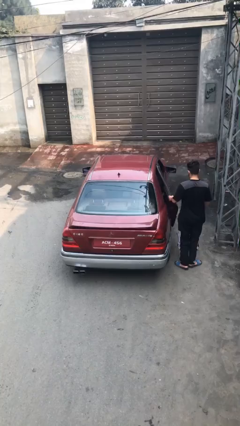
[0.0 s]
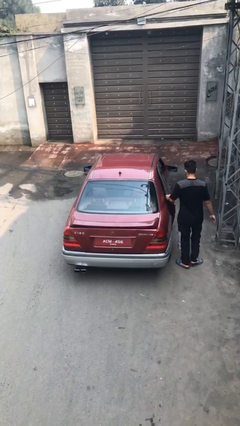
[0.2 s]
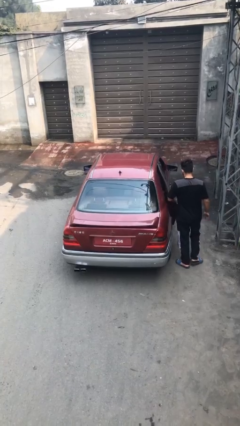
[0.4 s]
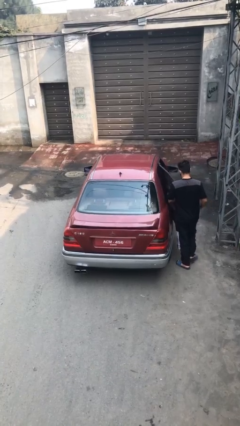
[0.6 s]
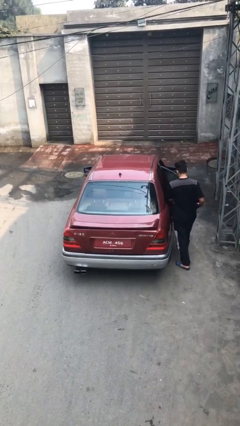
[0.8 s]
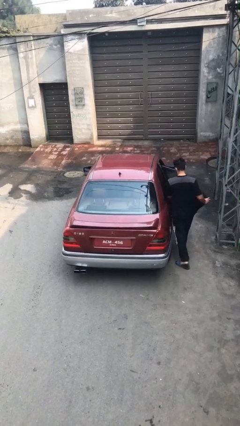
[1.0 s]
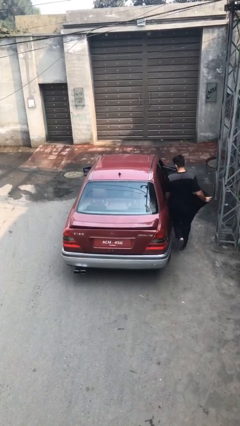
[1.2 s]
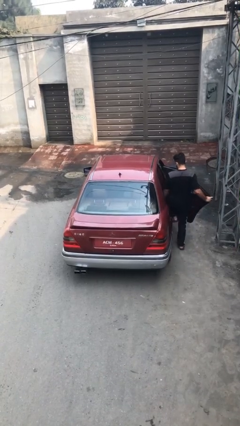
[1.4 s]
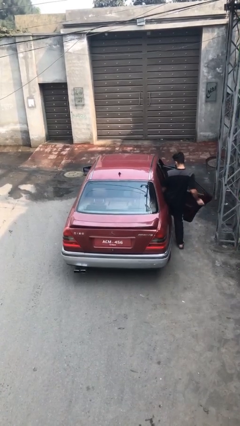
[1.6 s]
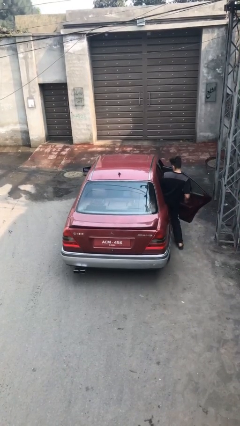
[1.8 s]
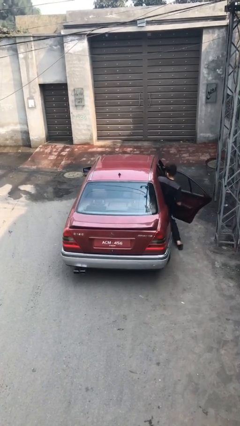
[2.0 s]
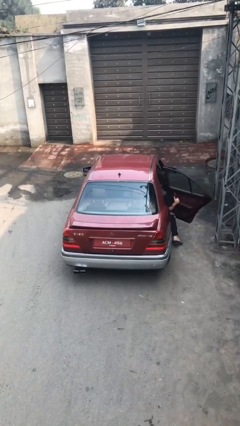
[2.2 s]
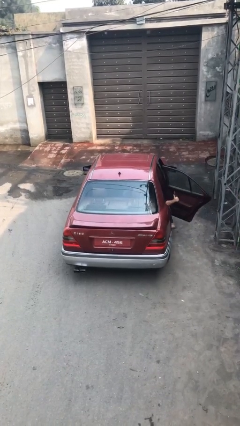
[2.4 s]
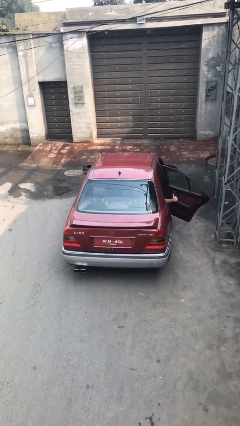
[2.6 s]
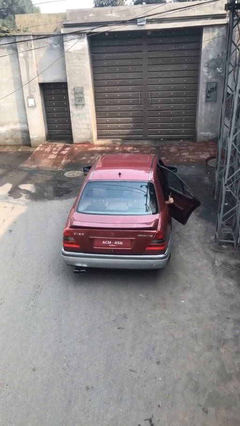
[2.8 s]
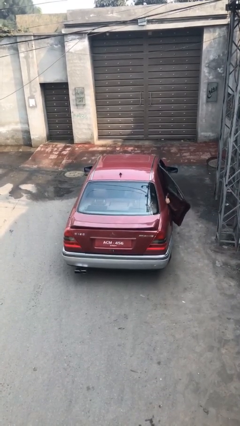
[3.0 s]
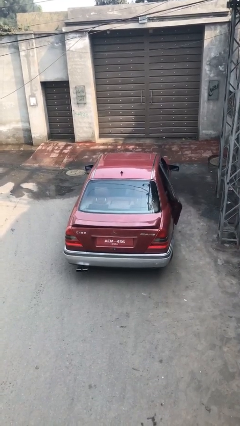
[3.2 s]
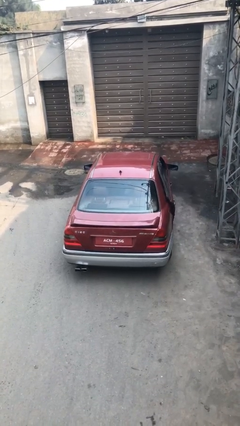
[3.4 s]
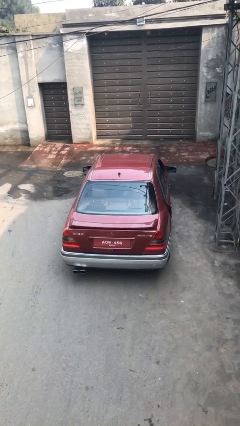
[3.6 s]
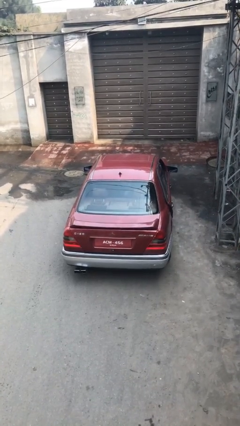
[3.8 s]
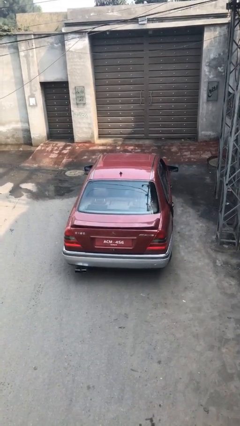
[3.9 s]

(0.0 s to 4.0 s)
car picks up person

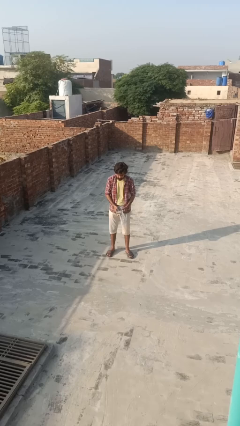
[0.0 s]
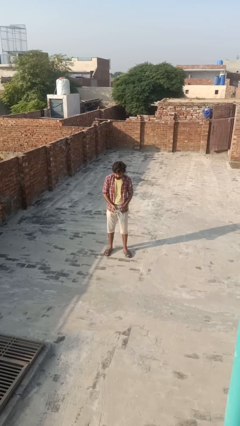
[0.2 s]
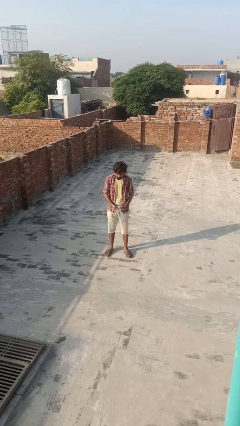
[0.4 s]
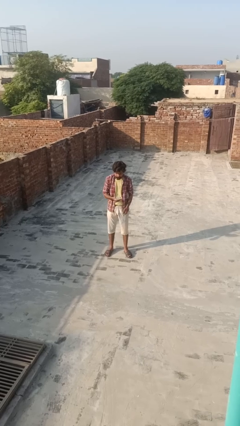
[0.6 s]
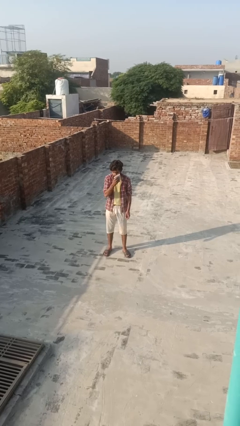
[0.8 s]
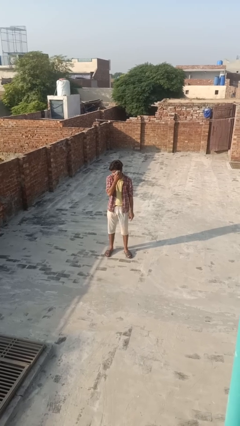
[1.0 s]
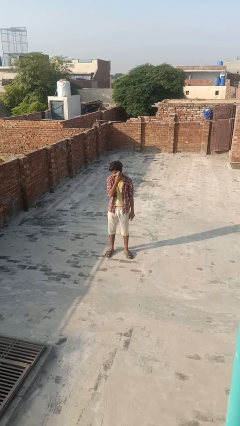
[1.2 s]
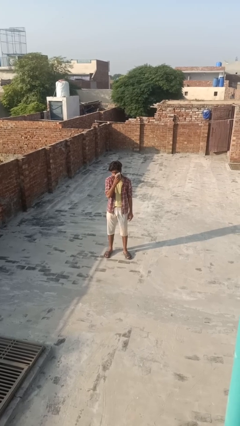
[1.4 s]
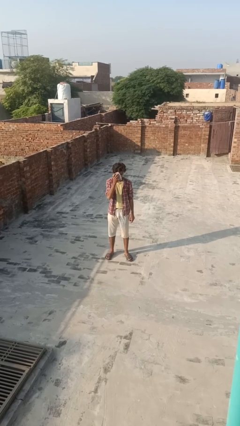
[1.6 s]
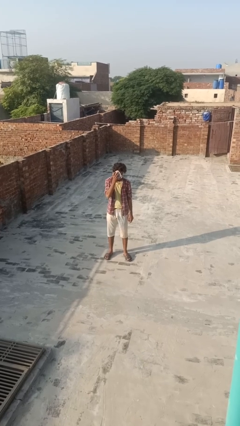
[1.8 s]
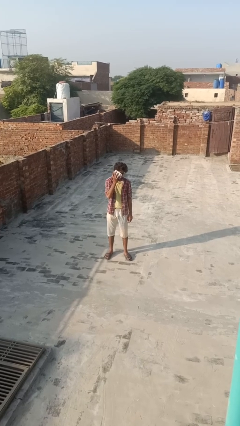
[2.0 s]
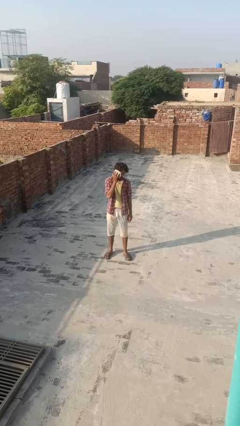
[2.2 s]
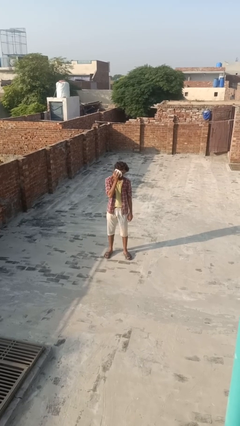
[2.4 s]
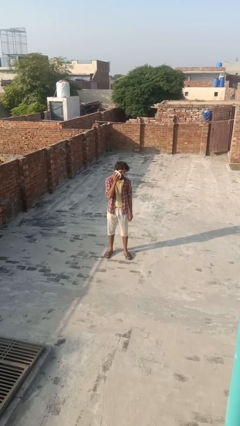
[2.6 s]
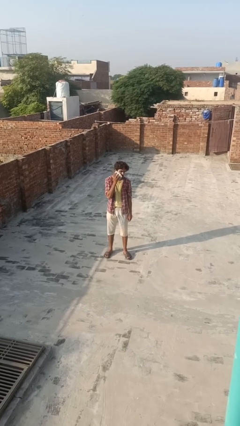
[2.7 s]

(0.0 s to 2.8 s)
person wipes mouth with napkin

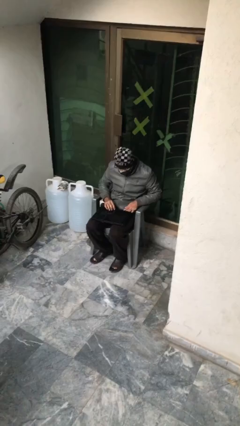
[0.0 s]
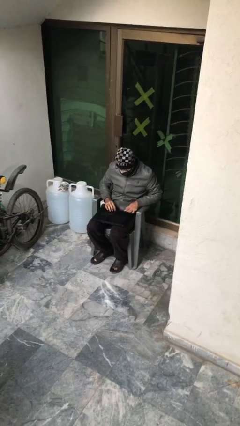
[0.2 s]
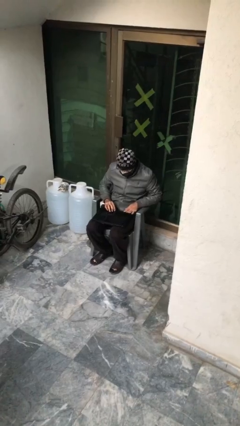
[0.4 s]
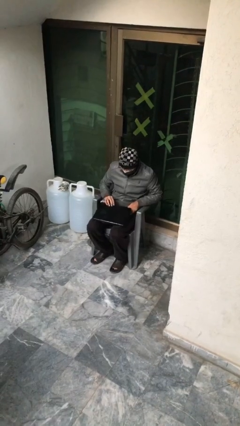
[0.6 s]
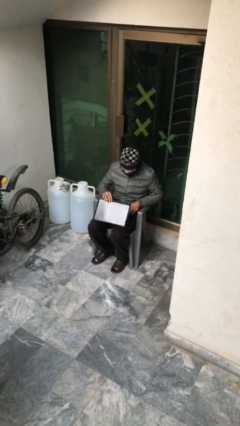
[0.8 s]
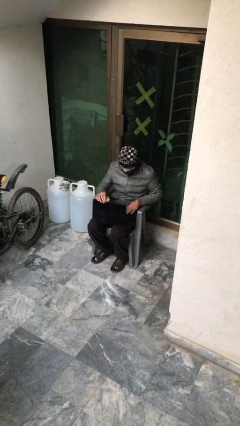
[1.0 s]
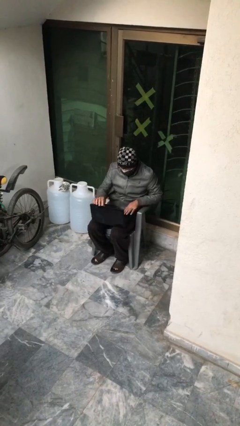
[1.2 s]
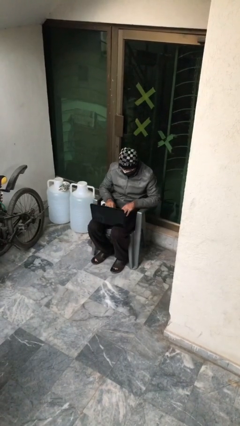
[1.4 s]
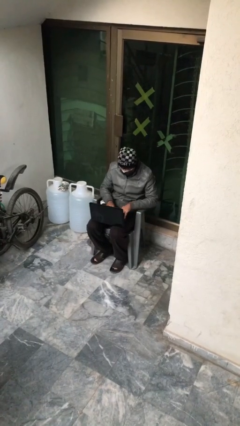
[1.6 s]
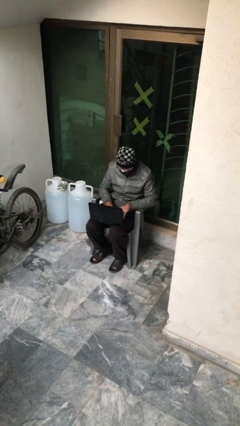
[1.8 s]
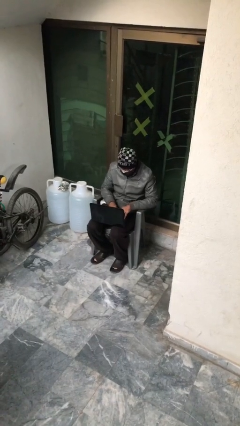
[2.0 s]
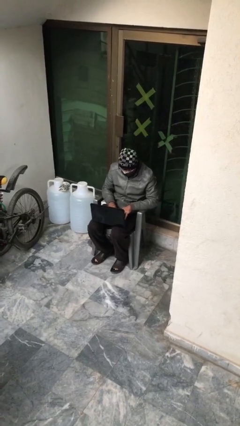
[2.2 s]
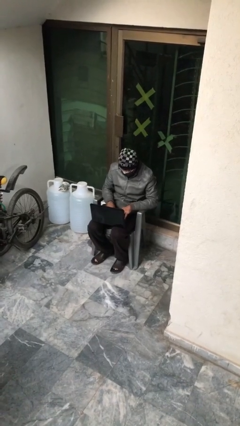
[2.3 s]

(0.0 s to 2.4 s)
person interacts with laptop

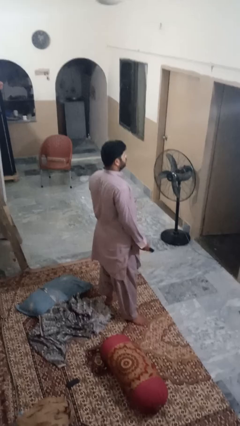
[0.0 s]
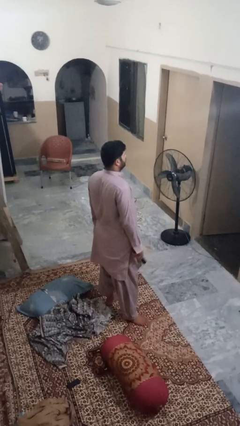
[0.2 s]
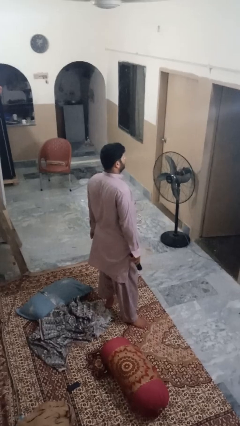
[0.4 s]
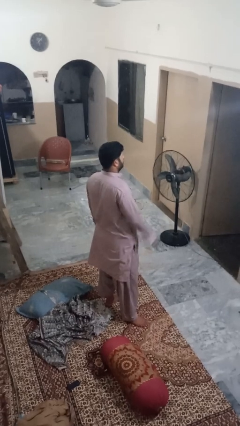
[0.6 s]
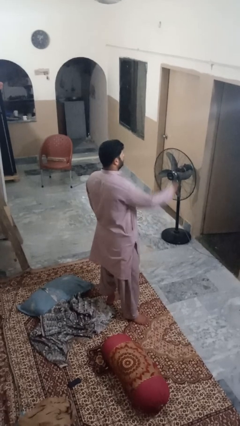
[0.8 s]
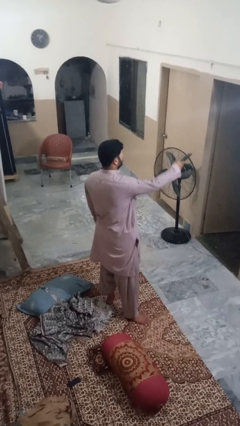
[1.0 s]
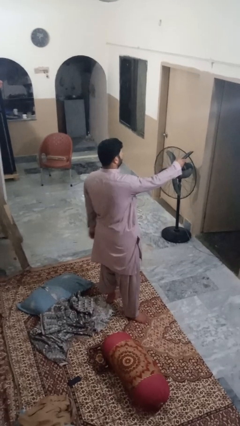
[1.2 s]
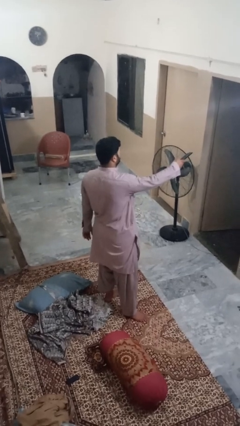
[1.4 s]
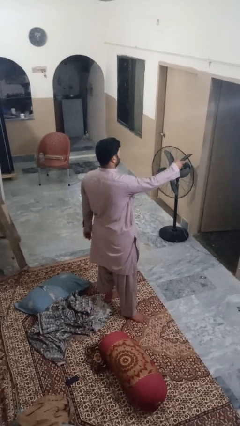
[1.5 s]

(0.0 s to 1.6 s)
person uses television remote

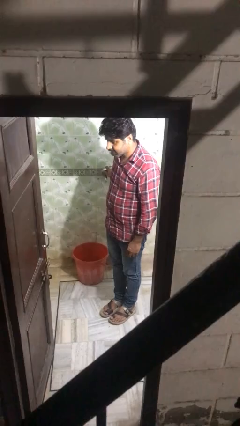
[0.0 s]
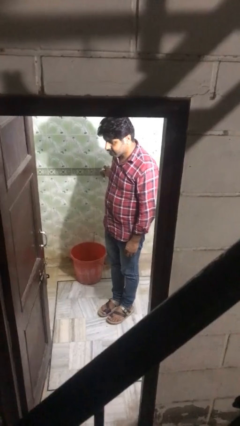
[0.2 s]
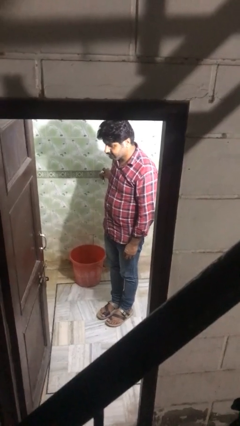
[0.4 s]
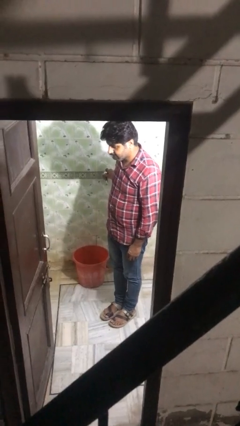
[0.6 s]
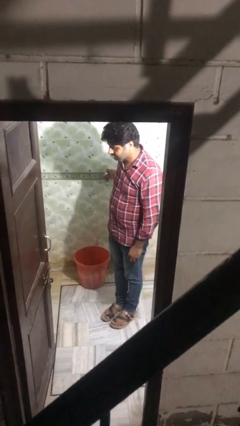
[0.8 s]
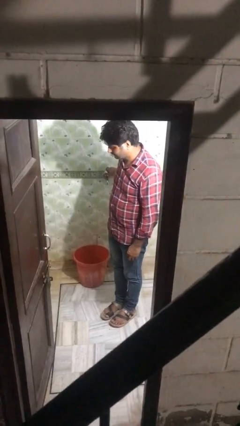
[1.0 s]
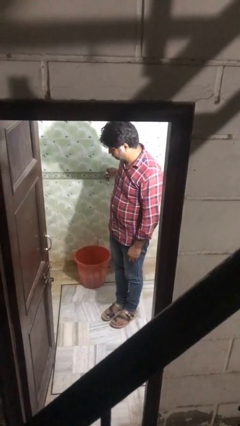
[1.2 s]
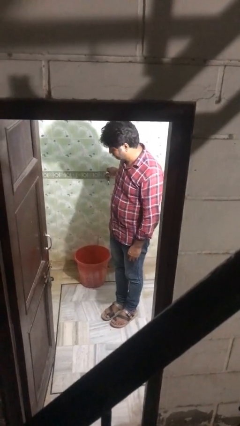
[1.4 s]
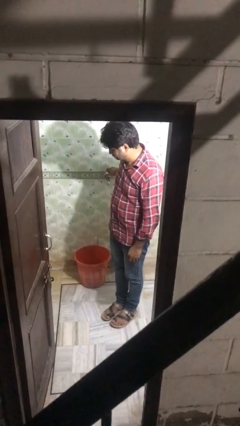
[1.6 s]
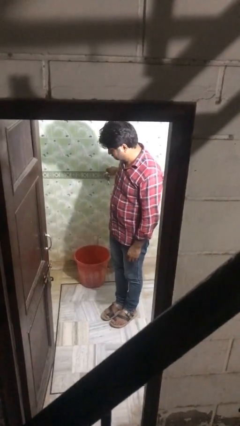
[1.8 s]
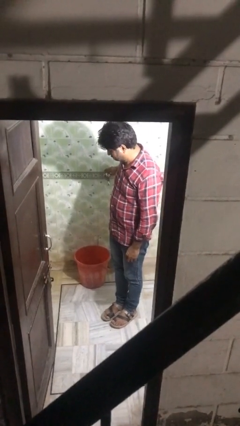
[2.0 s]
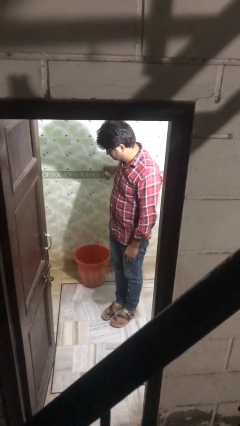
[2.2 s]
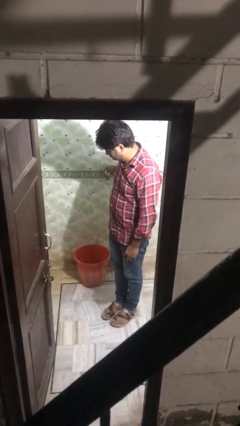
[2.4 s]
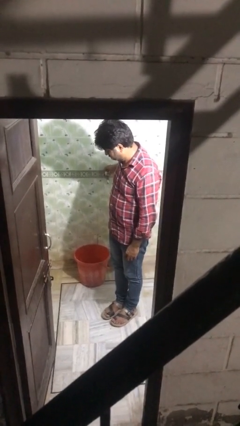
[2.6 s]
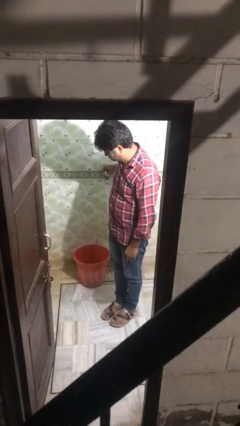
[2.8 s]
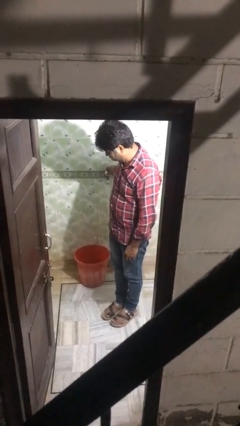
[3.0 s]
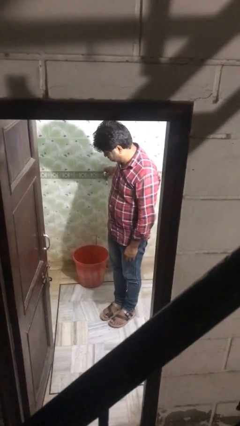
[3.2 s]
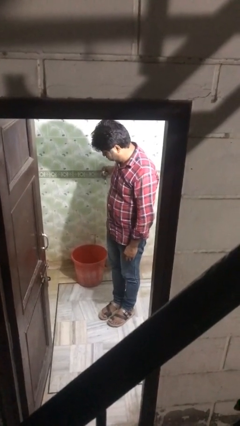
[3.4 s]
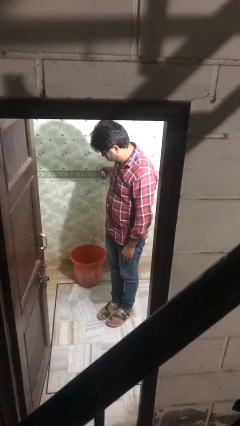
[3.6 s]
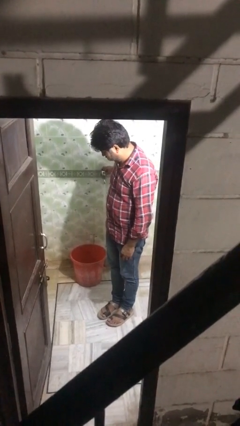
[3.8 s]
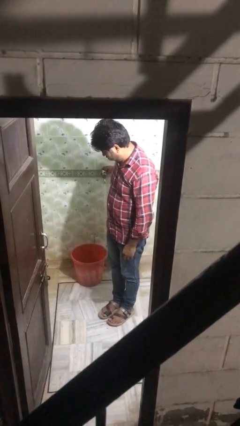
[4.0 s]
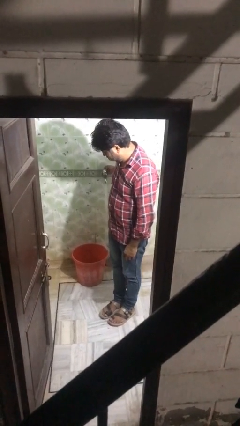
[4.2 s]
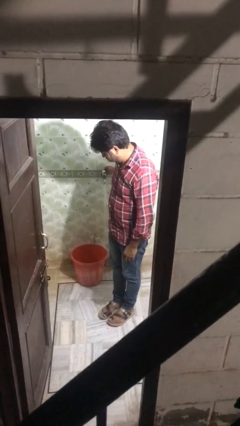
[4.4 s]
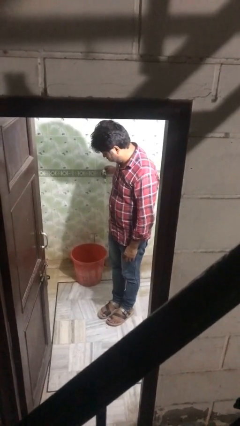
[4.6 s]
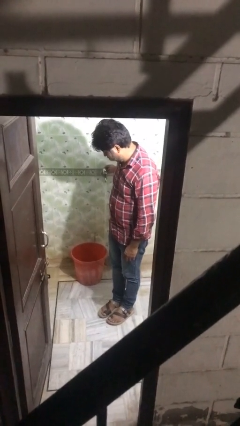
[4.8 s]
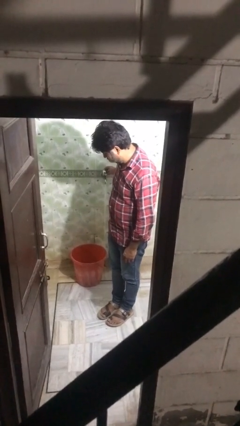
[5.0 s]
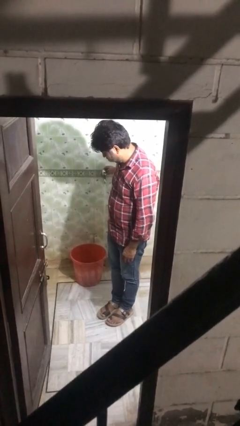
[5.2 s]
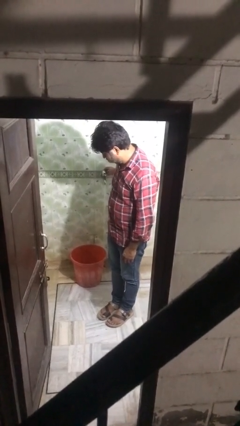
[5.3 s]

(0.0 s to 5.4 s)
person turns on faucet

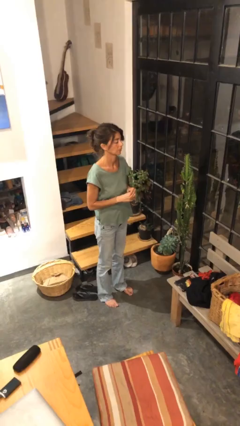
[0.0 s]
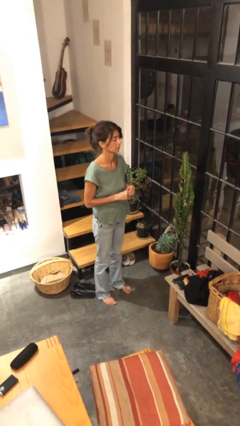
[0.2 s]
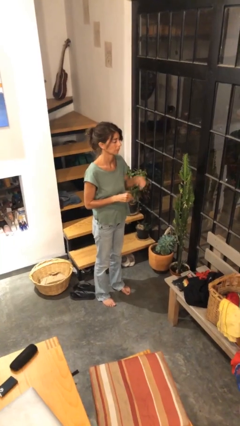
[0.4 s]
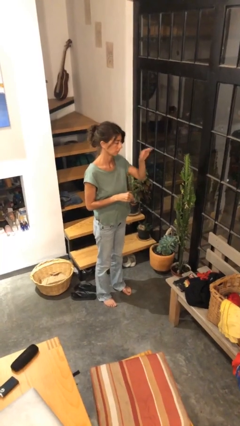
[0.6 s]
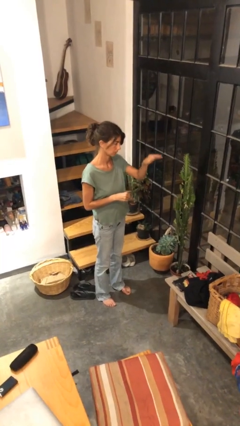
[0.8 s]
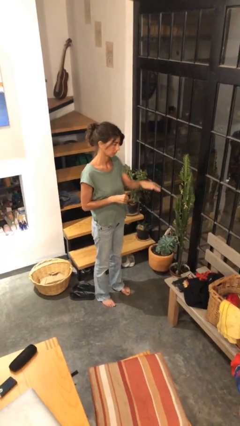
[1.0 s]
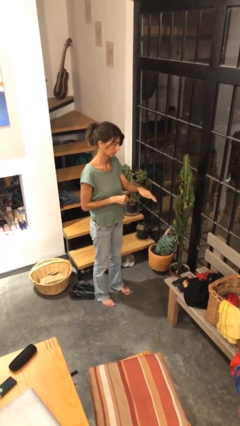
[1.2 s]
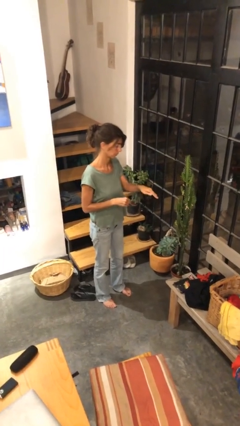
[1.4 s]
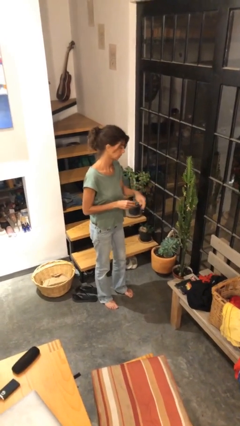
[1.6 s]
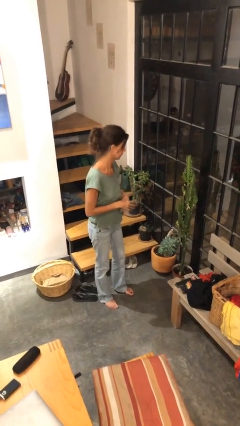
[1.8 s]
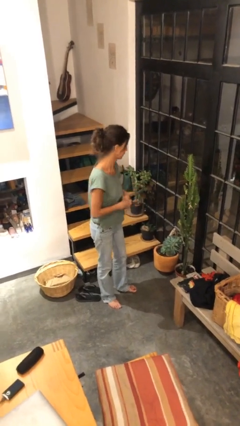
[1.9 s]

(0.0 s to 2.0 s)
person gestures swipe down
